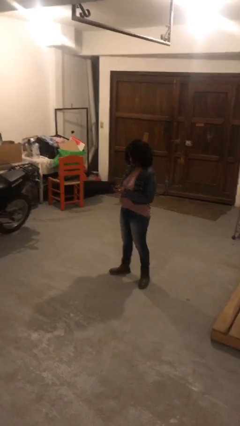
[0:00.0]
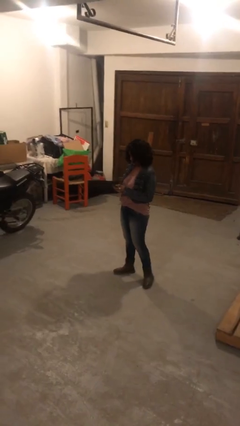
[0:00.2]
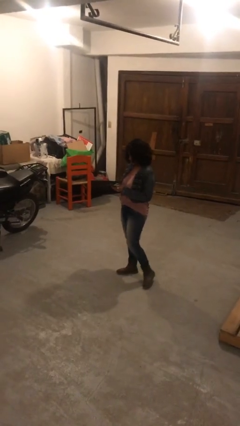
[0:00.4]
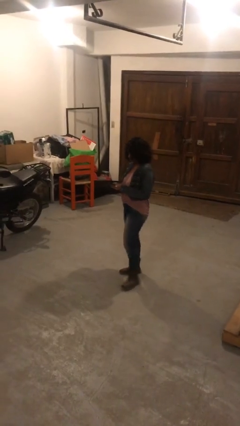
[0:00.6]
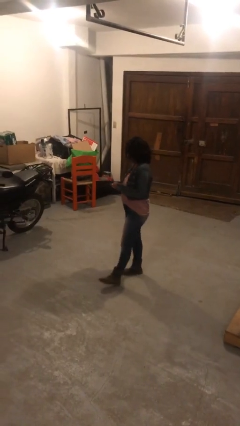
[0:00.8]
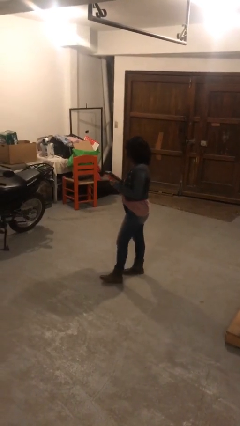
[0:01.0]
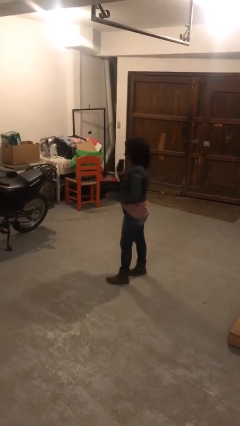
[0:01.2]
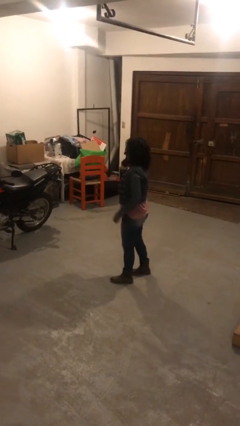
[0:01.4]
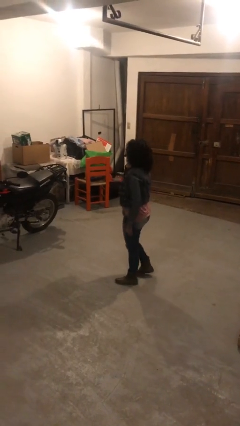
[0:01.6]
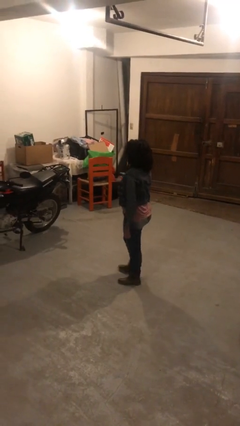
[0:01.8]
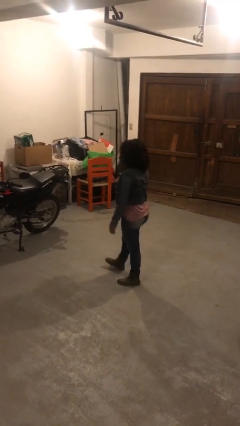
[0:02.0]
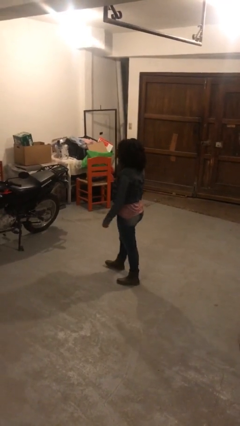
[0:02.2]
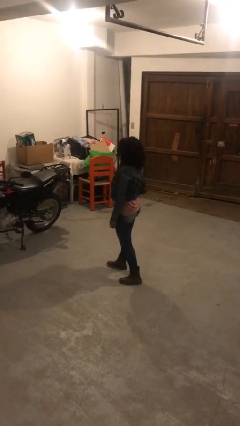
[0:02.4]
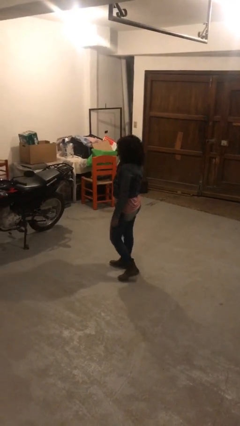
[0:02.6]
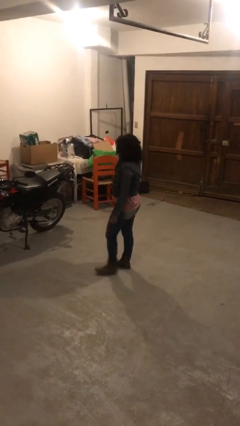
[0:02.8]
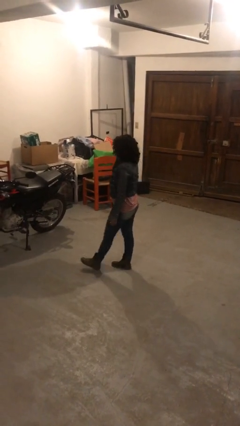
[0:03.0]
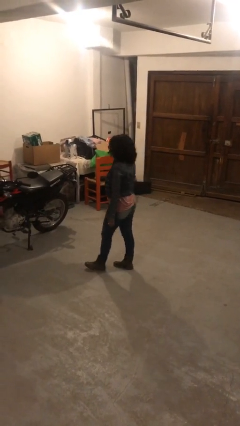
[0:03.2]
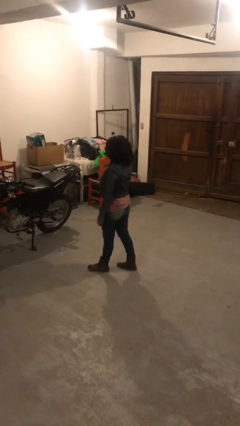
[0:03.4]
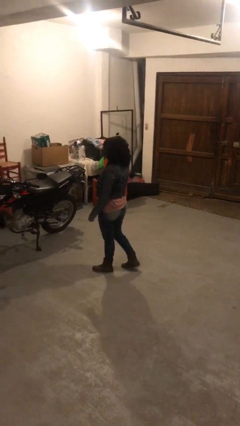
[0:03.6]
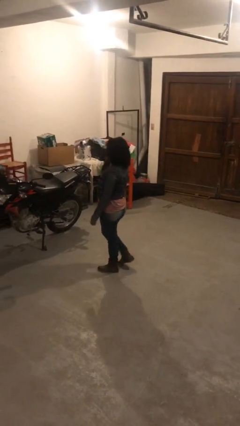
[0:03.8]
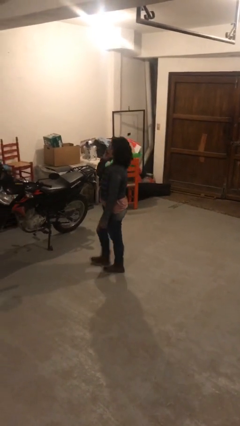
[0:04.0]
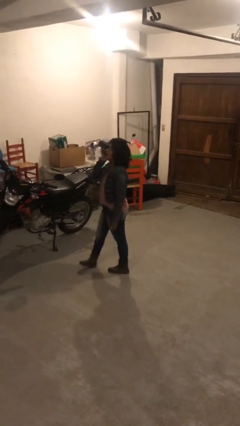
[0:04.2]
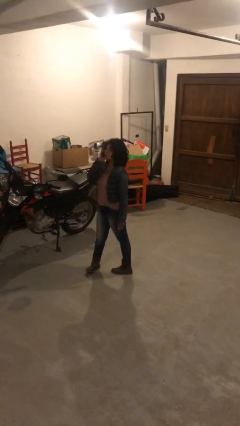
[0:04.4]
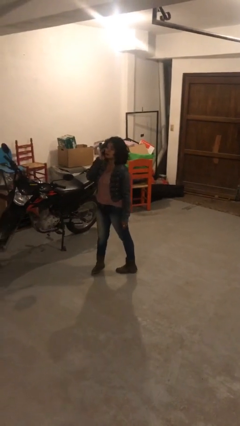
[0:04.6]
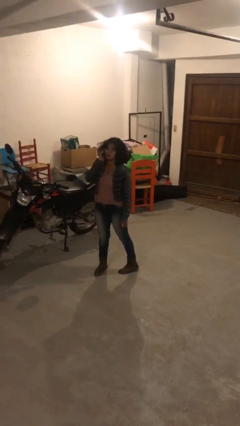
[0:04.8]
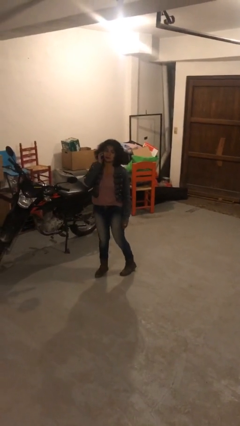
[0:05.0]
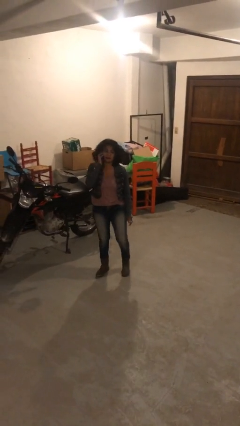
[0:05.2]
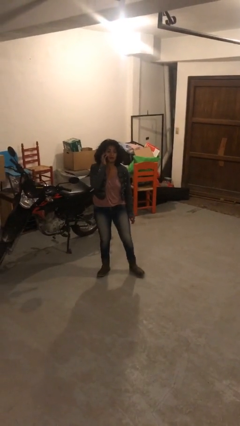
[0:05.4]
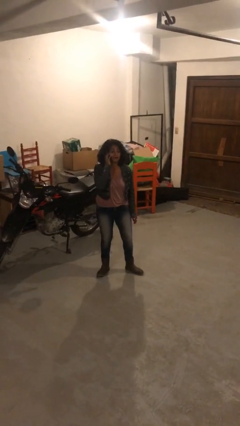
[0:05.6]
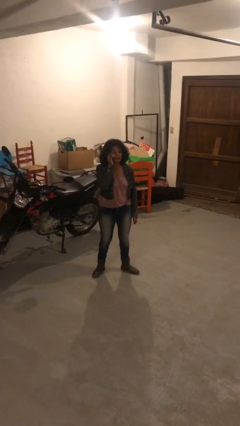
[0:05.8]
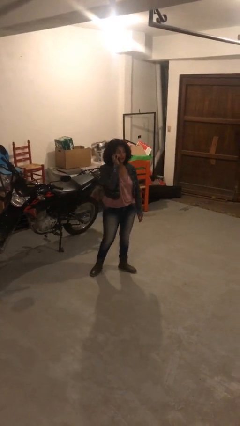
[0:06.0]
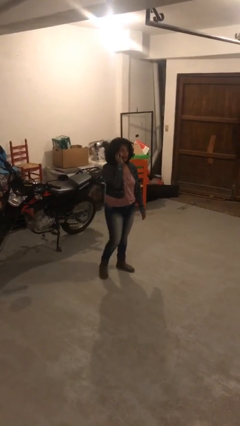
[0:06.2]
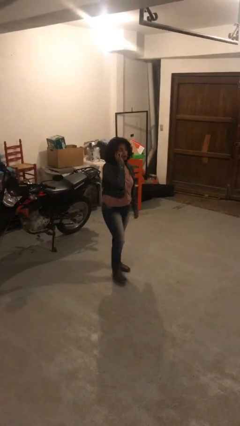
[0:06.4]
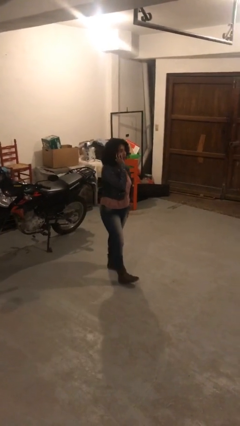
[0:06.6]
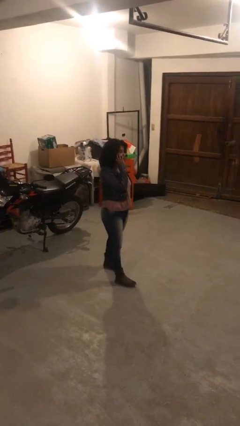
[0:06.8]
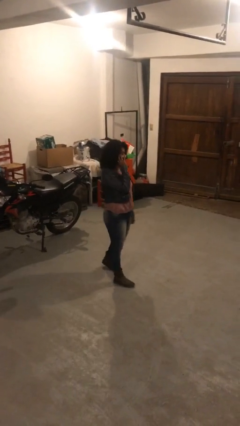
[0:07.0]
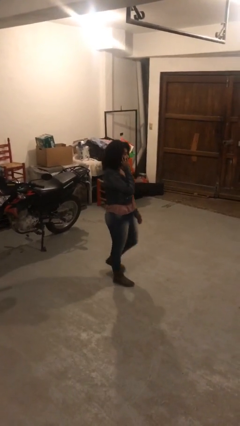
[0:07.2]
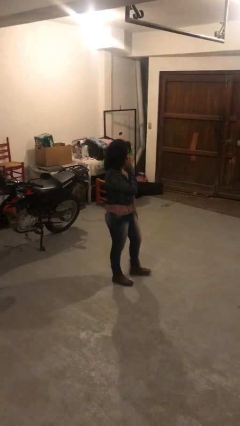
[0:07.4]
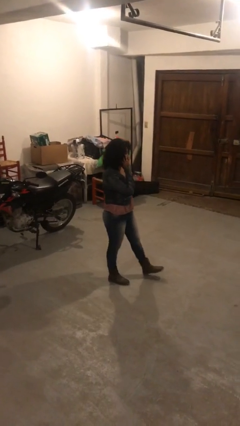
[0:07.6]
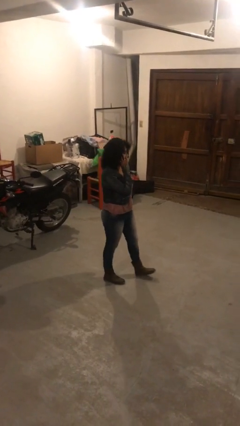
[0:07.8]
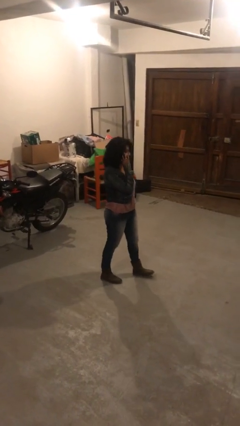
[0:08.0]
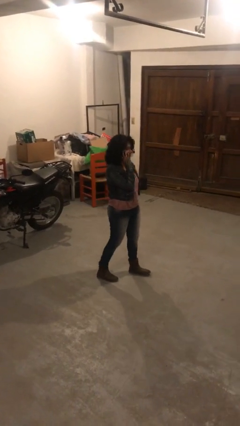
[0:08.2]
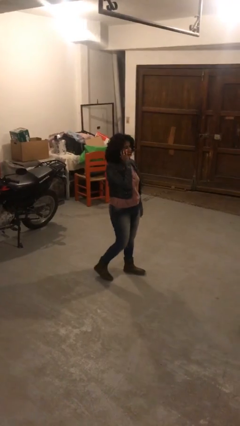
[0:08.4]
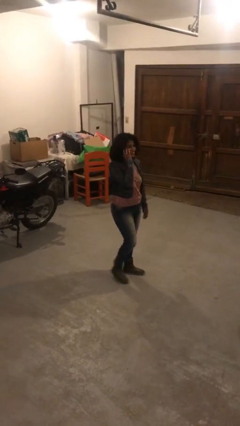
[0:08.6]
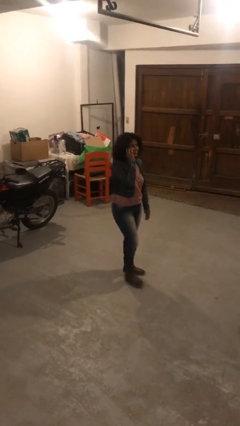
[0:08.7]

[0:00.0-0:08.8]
person talks on phone

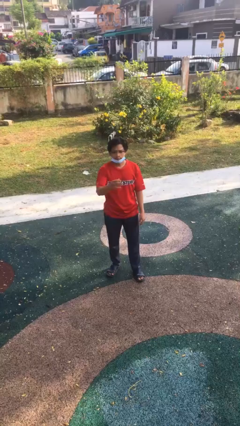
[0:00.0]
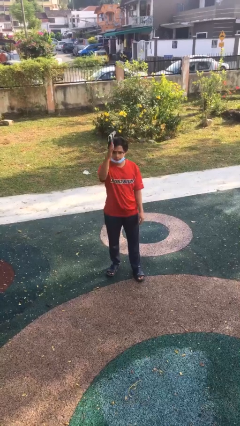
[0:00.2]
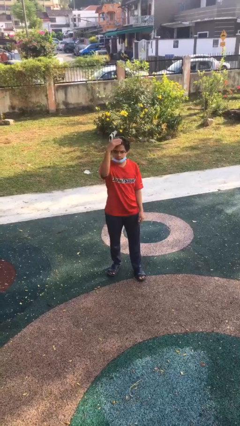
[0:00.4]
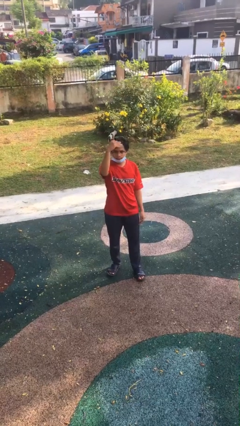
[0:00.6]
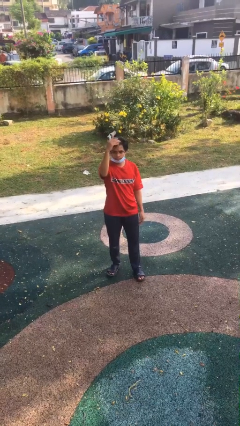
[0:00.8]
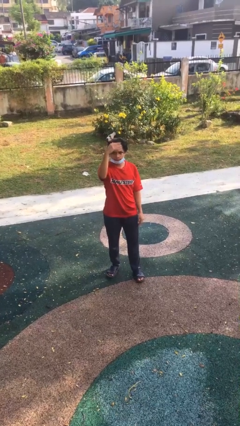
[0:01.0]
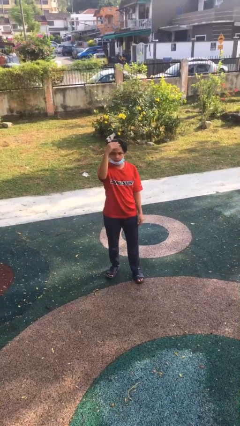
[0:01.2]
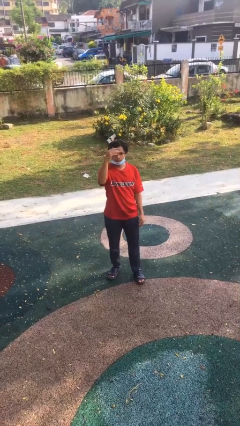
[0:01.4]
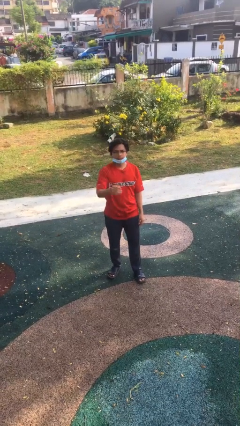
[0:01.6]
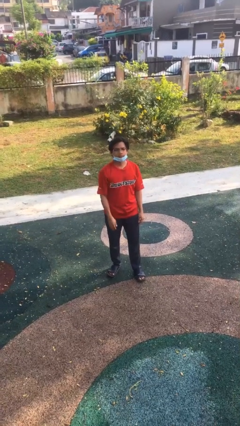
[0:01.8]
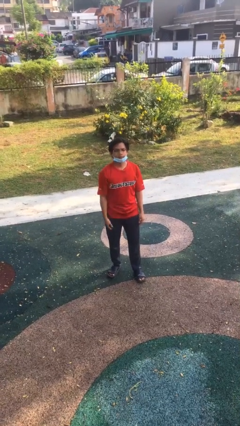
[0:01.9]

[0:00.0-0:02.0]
person gestures come here

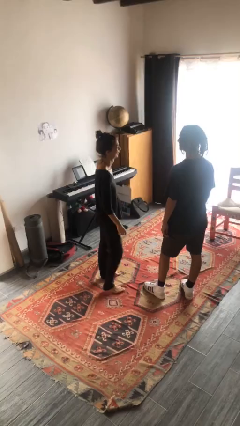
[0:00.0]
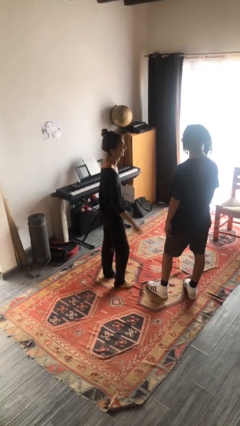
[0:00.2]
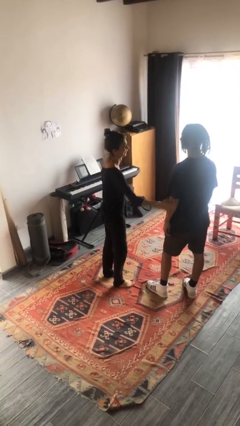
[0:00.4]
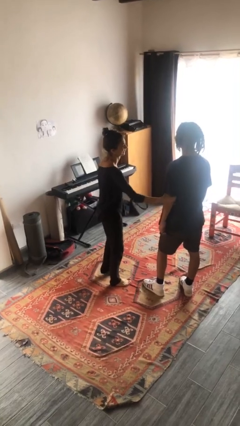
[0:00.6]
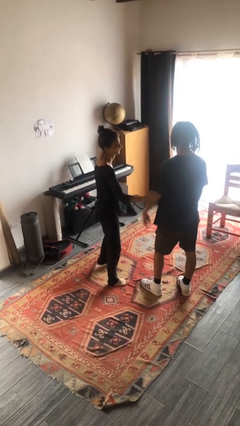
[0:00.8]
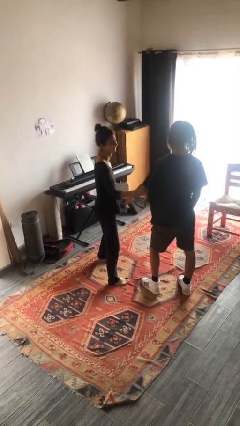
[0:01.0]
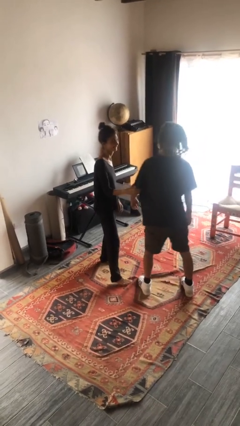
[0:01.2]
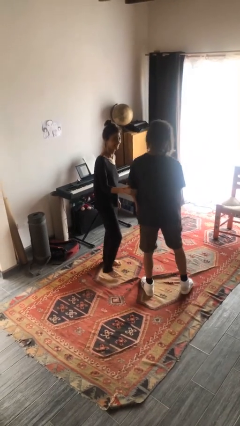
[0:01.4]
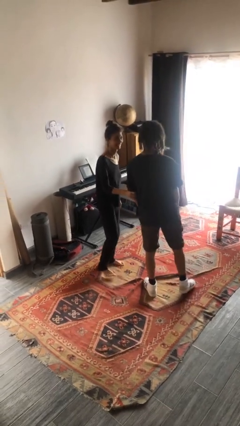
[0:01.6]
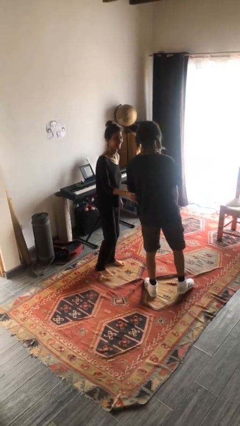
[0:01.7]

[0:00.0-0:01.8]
person grabs person by forearm

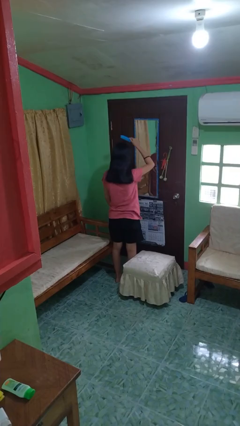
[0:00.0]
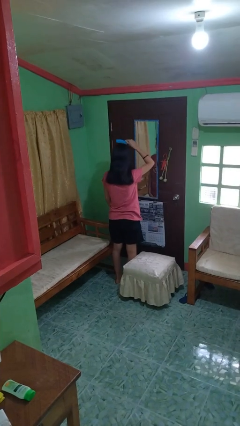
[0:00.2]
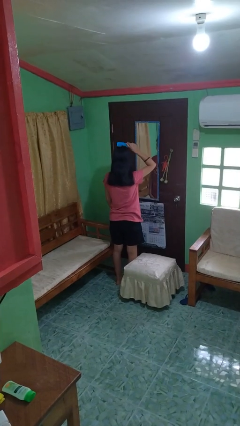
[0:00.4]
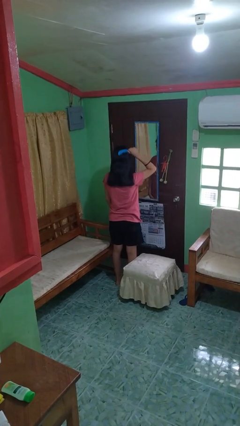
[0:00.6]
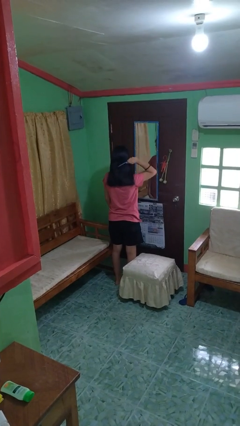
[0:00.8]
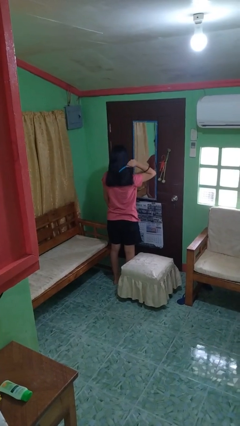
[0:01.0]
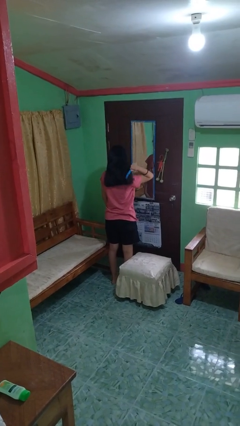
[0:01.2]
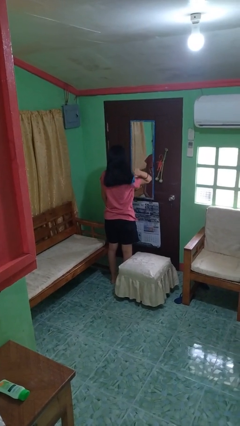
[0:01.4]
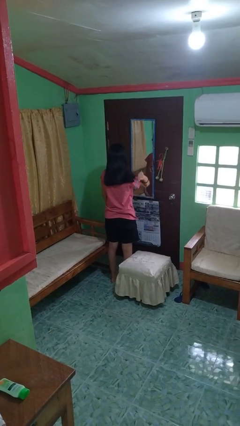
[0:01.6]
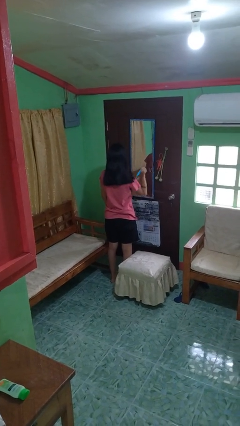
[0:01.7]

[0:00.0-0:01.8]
person brushes hair

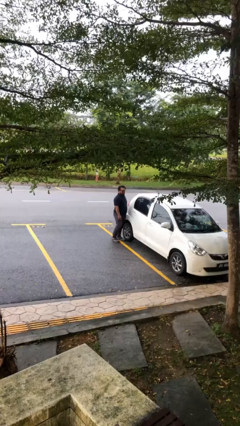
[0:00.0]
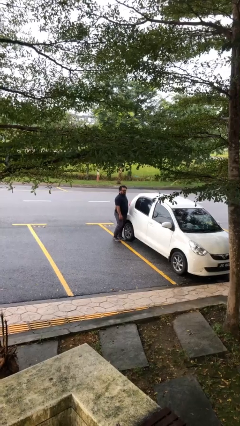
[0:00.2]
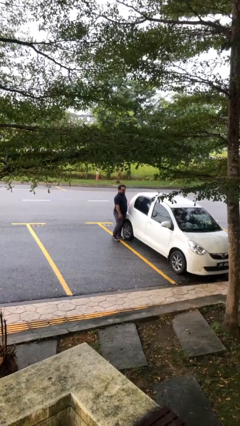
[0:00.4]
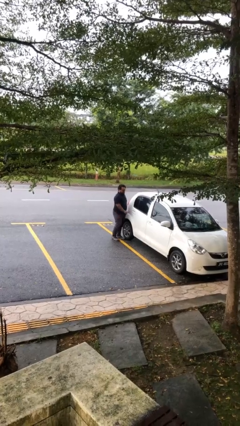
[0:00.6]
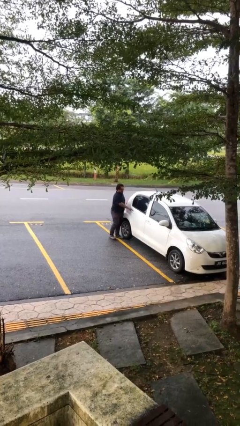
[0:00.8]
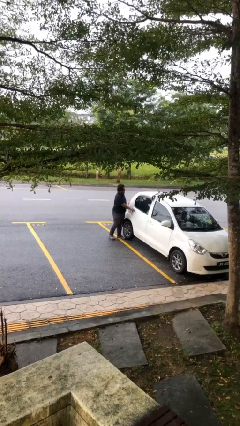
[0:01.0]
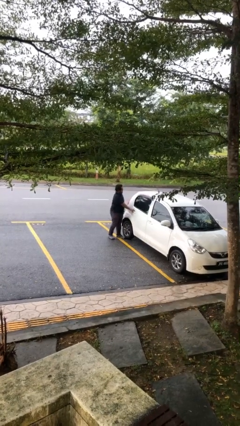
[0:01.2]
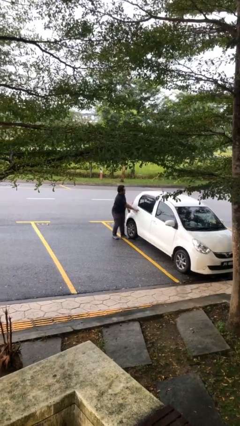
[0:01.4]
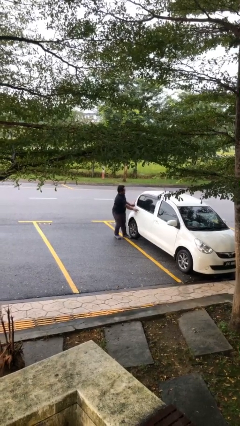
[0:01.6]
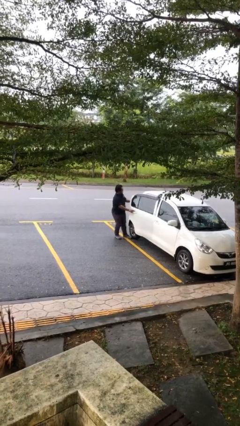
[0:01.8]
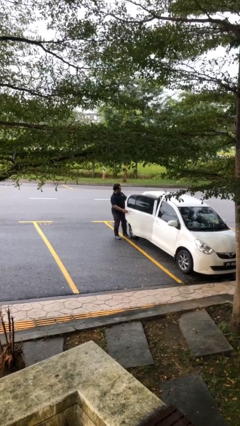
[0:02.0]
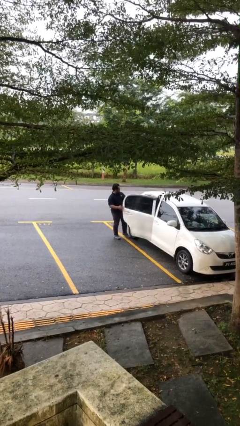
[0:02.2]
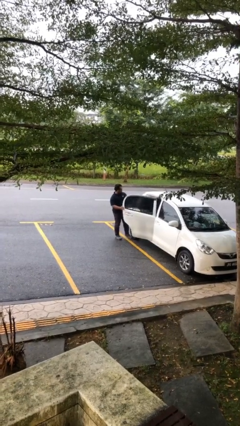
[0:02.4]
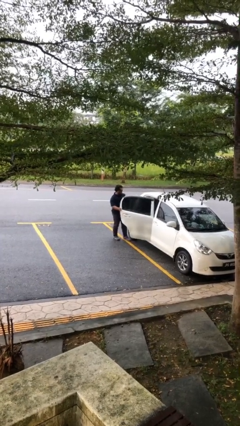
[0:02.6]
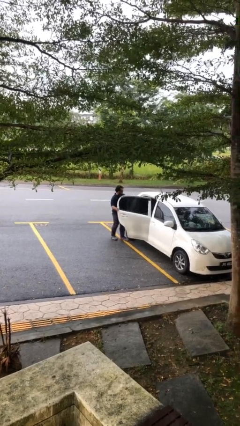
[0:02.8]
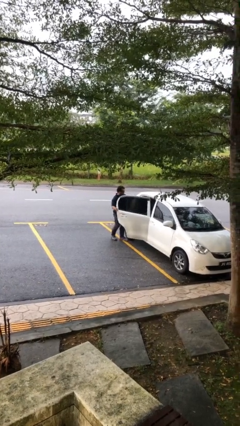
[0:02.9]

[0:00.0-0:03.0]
person opens car door
